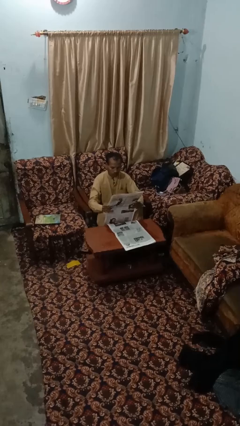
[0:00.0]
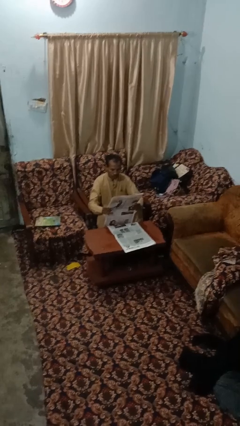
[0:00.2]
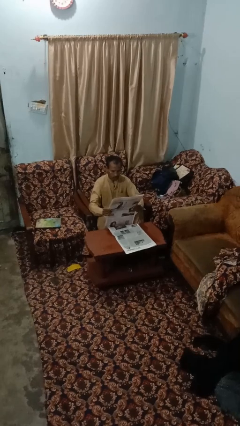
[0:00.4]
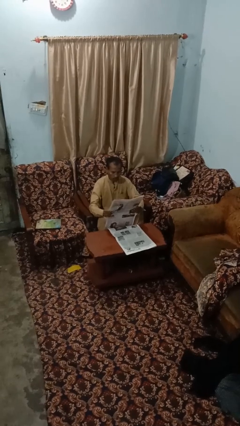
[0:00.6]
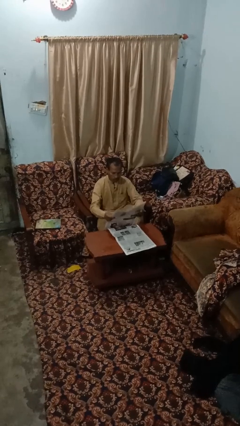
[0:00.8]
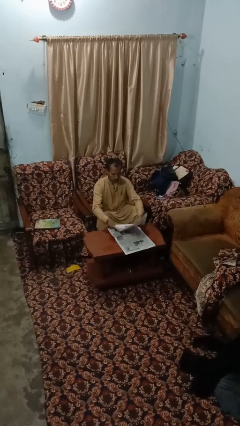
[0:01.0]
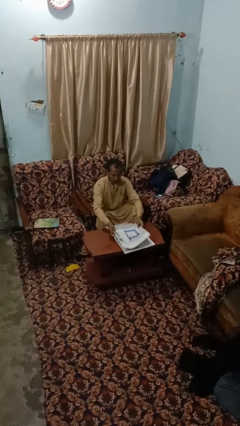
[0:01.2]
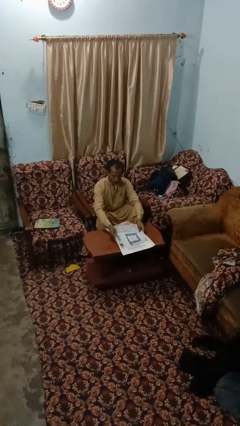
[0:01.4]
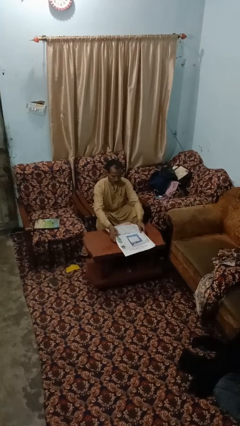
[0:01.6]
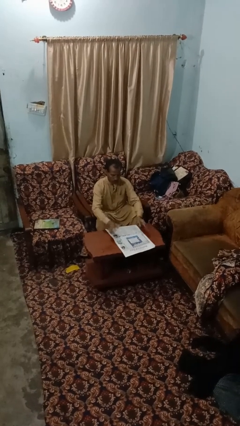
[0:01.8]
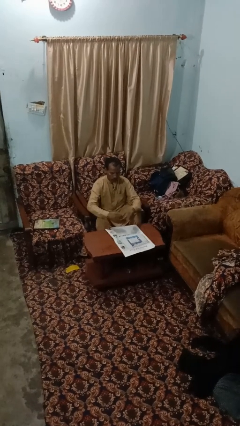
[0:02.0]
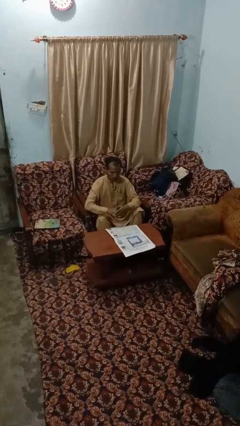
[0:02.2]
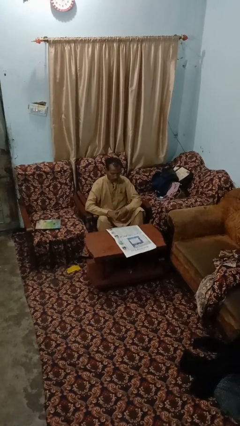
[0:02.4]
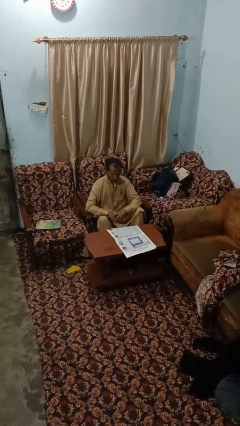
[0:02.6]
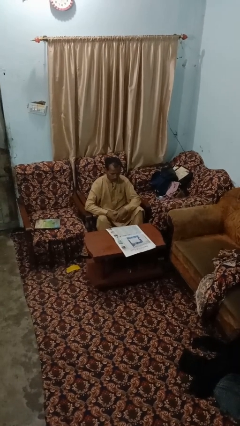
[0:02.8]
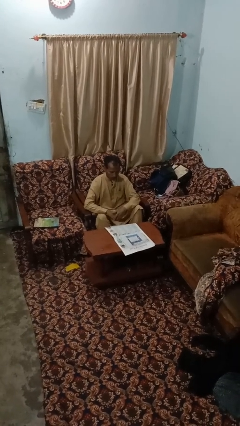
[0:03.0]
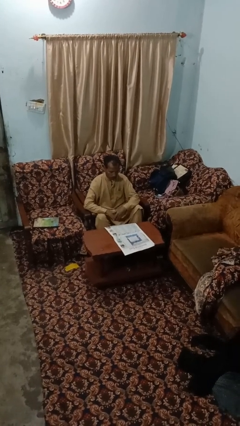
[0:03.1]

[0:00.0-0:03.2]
person reads newspaper

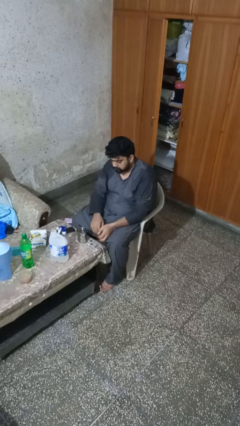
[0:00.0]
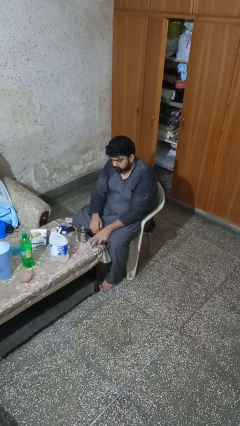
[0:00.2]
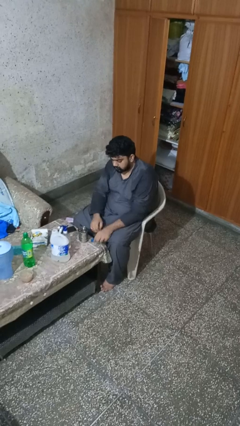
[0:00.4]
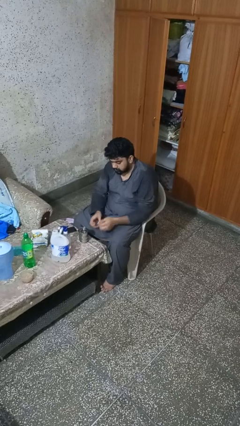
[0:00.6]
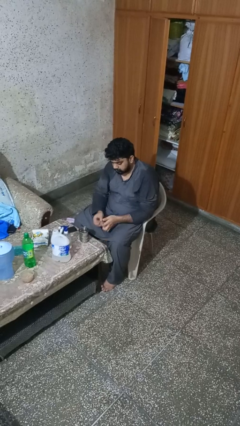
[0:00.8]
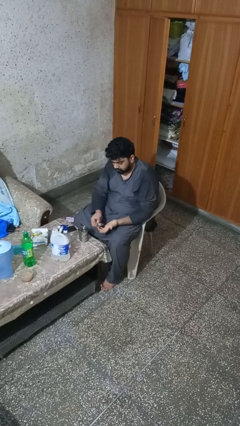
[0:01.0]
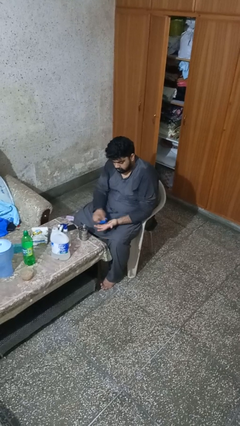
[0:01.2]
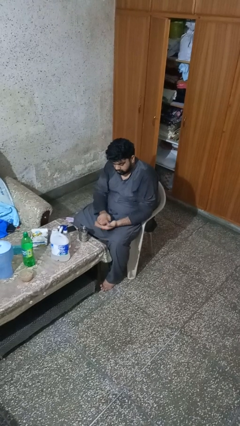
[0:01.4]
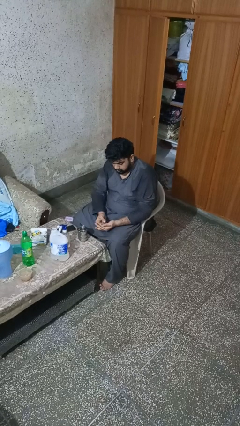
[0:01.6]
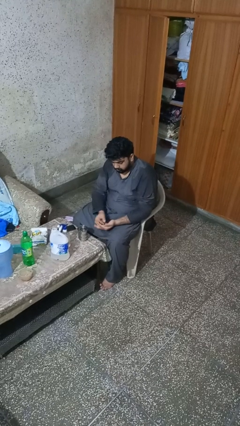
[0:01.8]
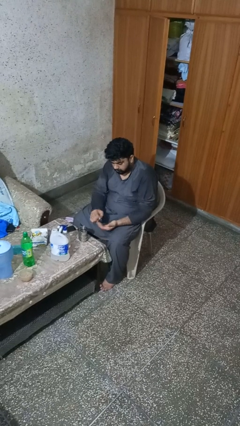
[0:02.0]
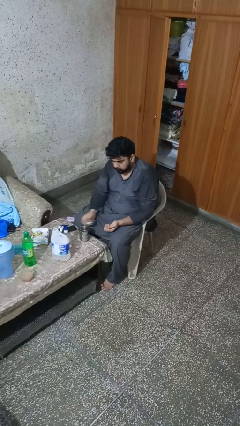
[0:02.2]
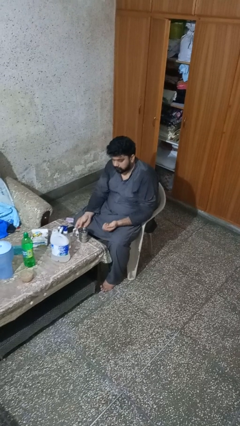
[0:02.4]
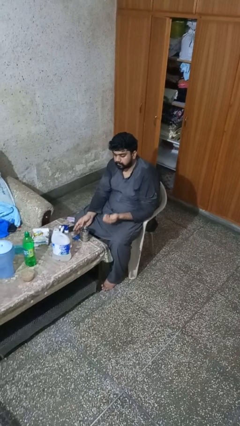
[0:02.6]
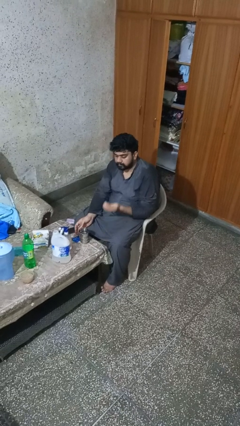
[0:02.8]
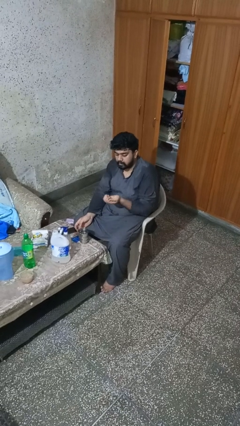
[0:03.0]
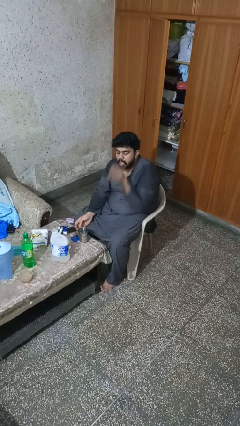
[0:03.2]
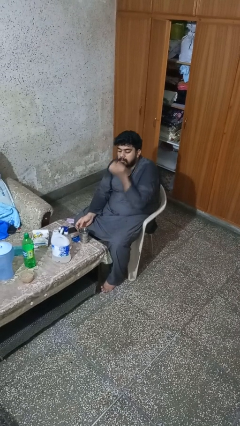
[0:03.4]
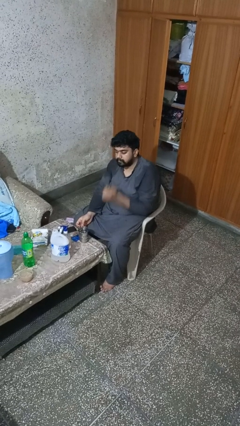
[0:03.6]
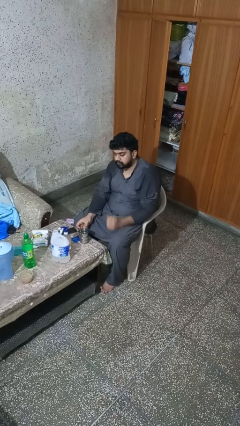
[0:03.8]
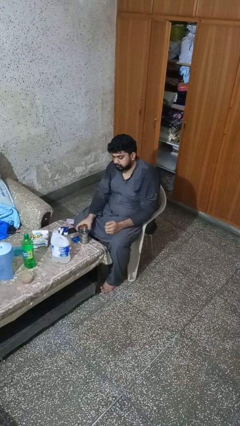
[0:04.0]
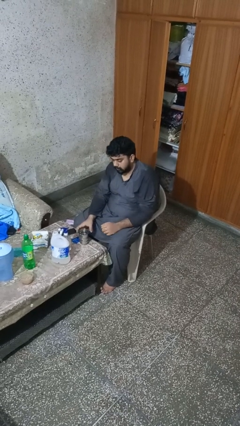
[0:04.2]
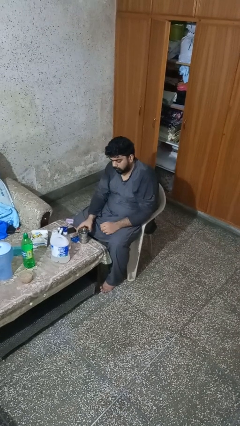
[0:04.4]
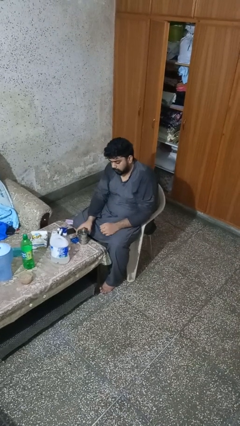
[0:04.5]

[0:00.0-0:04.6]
person takes medicine pills

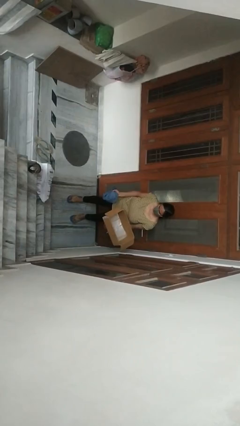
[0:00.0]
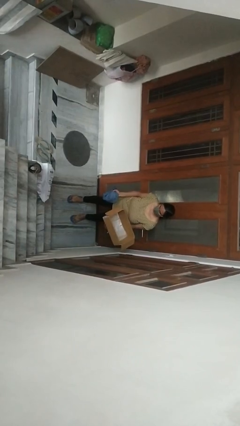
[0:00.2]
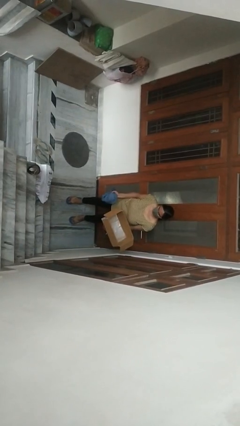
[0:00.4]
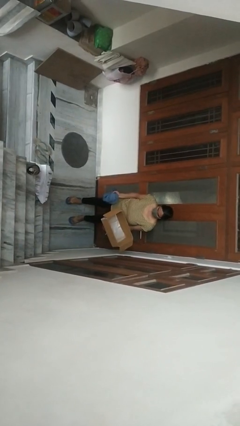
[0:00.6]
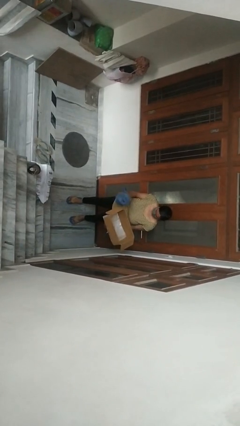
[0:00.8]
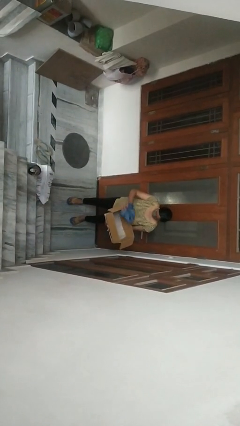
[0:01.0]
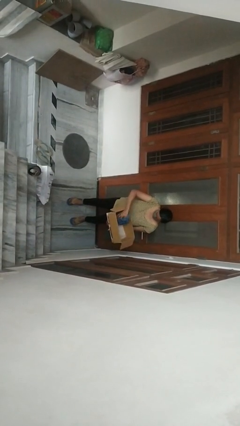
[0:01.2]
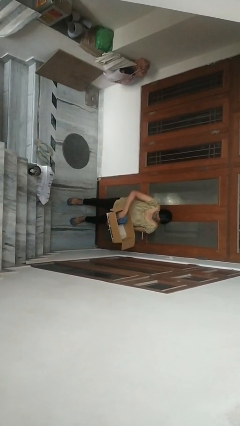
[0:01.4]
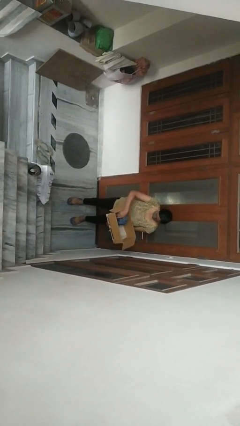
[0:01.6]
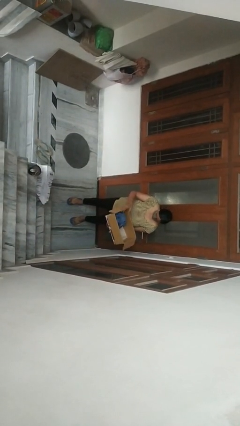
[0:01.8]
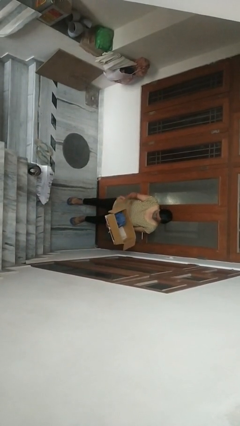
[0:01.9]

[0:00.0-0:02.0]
person puts object into box

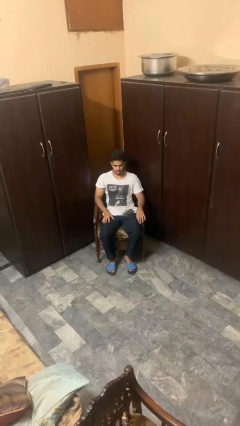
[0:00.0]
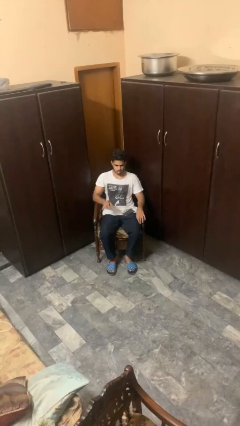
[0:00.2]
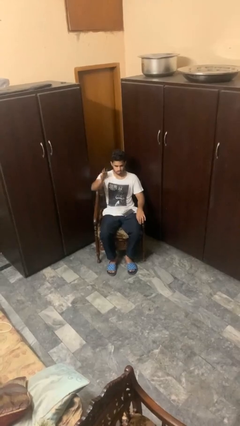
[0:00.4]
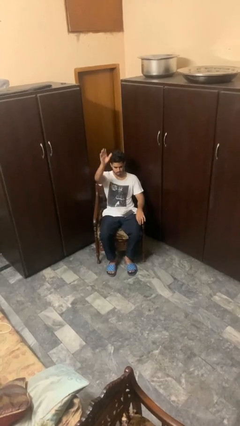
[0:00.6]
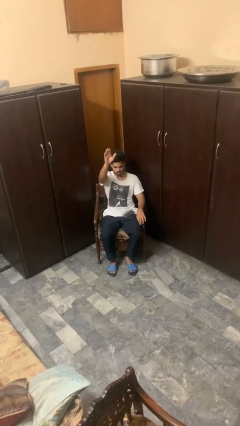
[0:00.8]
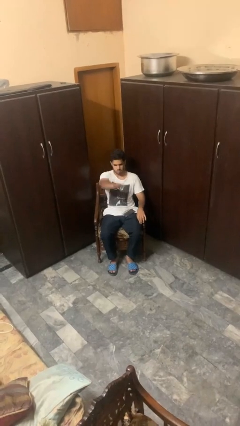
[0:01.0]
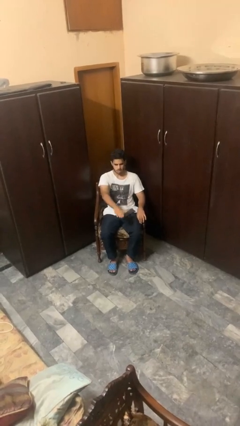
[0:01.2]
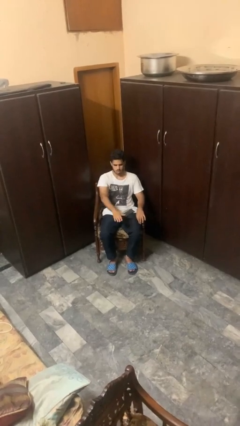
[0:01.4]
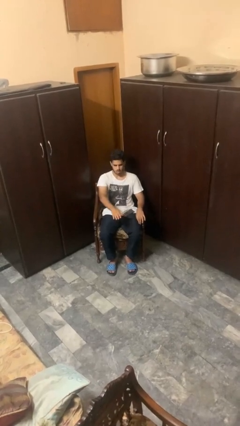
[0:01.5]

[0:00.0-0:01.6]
person gestures swipe down

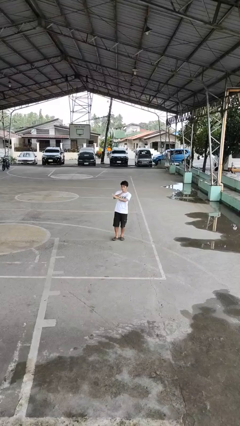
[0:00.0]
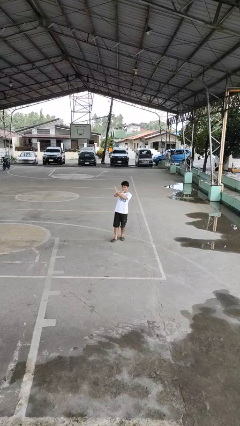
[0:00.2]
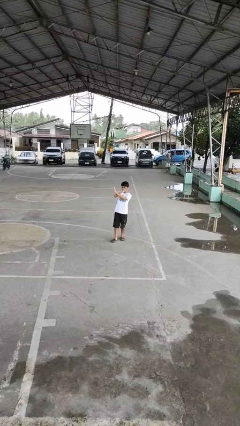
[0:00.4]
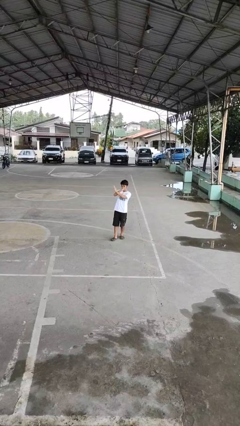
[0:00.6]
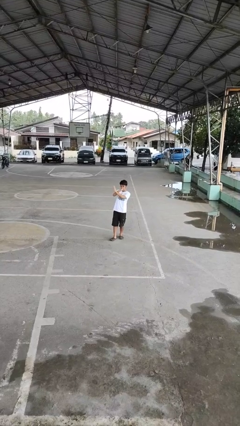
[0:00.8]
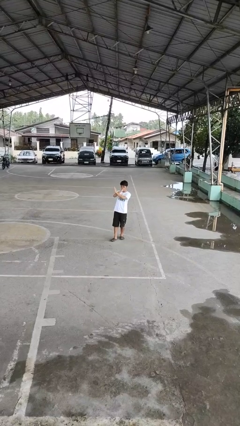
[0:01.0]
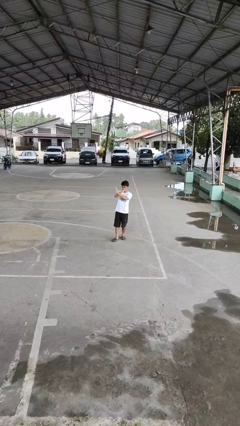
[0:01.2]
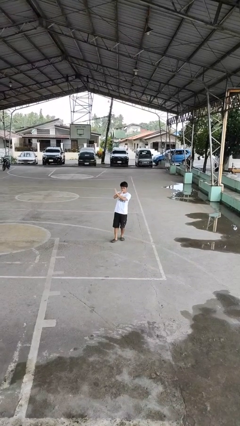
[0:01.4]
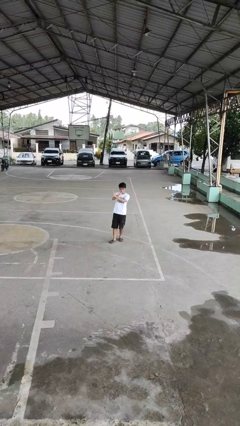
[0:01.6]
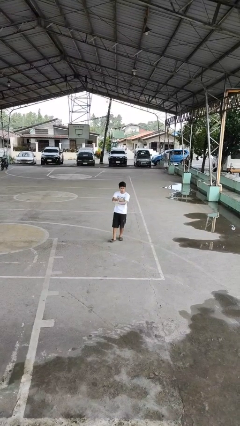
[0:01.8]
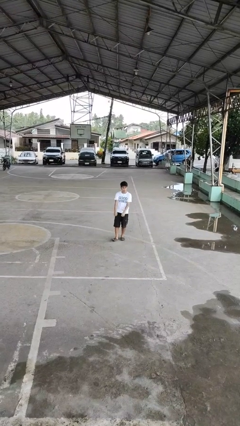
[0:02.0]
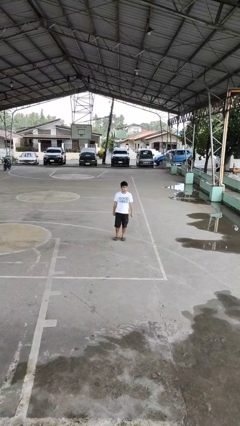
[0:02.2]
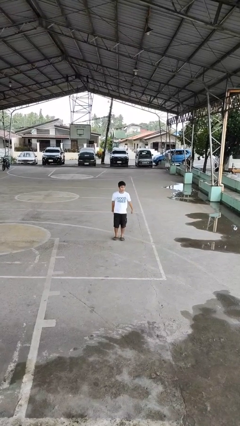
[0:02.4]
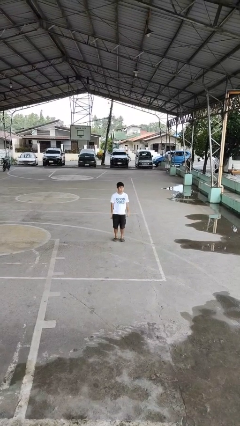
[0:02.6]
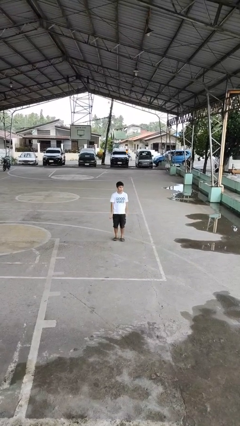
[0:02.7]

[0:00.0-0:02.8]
person gestures arms x

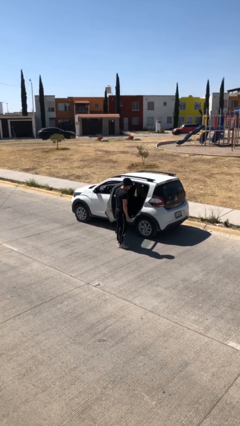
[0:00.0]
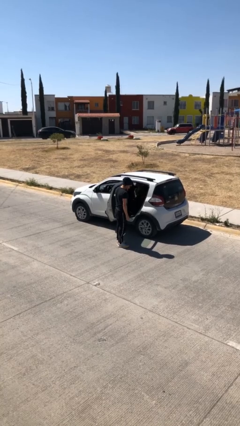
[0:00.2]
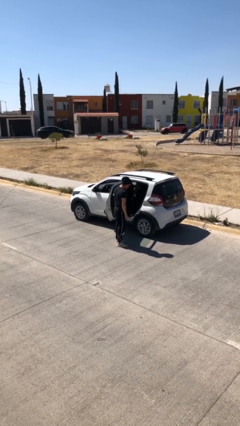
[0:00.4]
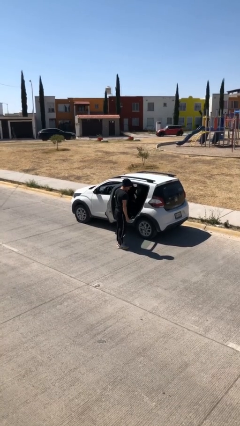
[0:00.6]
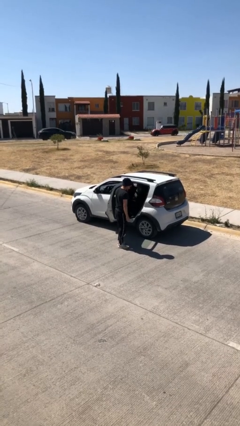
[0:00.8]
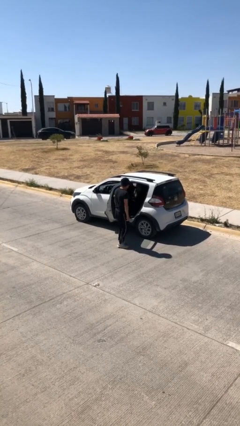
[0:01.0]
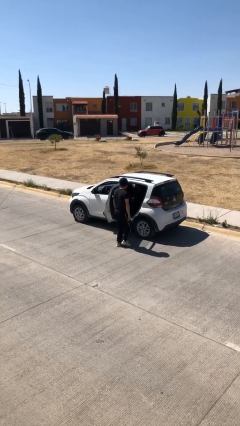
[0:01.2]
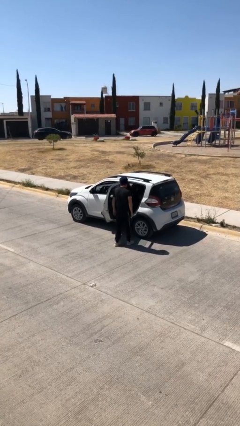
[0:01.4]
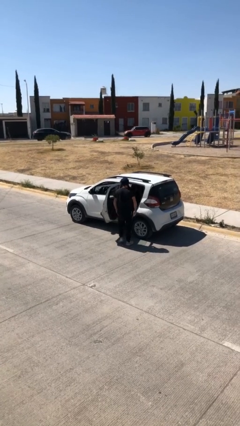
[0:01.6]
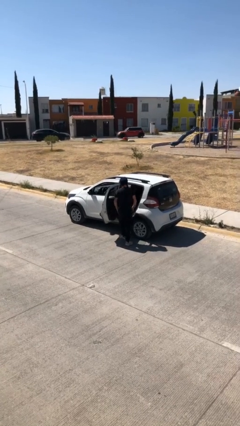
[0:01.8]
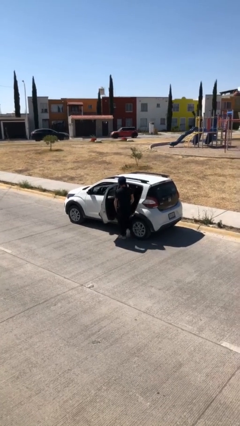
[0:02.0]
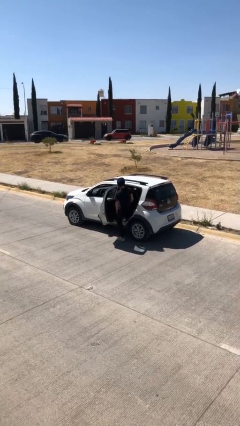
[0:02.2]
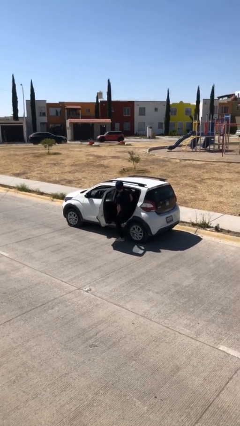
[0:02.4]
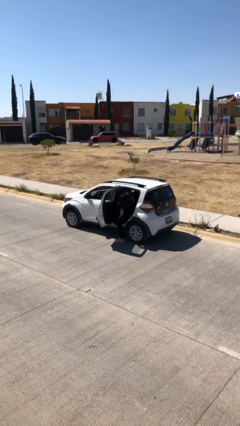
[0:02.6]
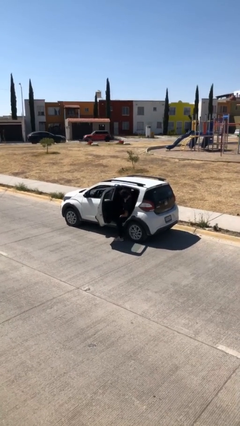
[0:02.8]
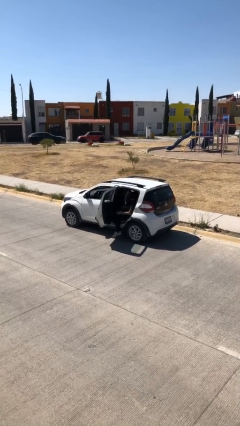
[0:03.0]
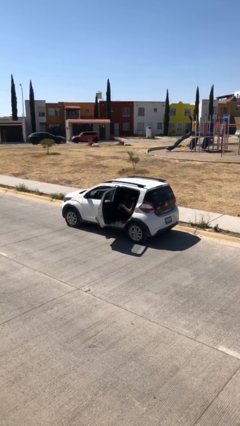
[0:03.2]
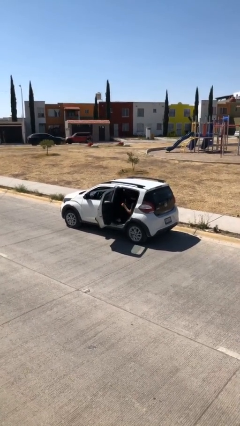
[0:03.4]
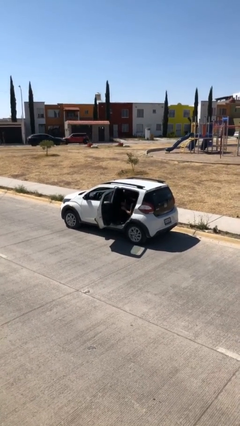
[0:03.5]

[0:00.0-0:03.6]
person enters car
